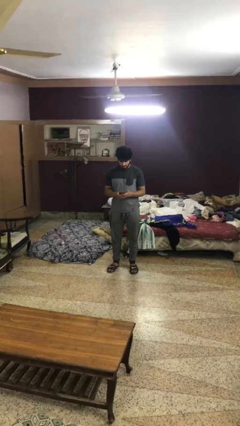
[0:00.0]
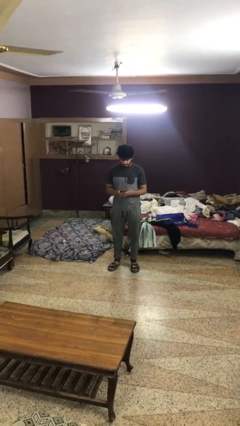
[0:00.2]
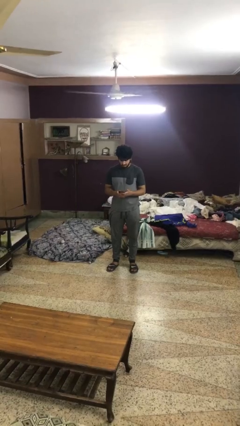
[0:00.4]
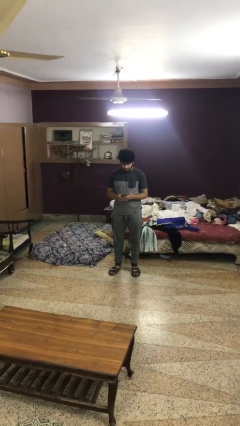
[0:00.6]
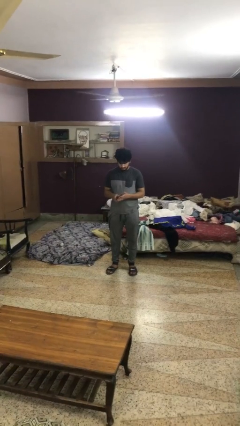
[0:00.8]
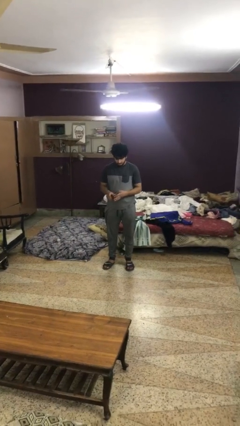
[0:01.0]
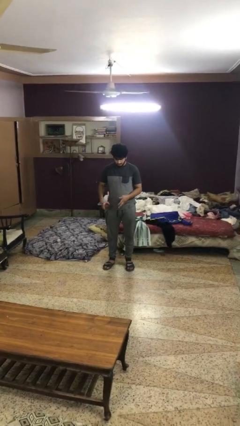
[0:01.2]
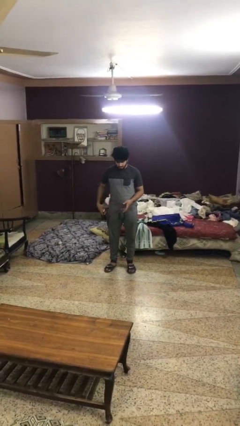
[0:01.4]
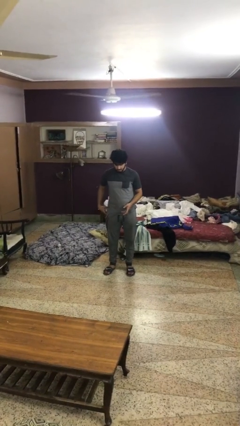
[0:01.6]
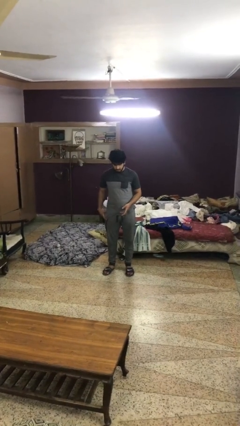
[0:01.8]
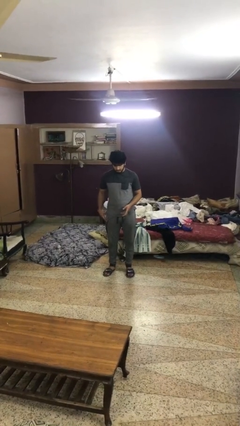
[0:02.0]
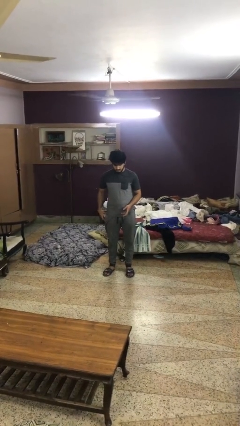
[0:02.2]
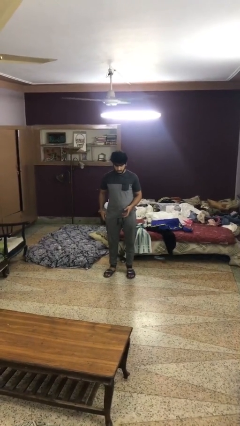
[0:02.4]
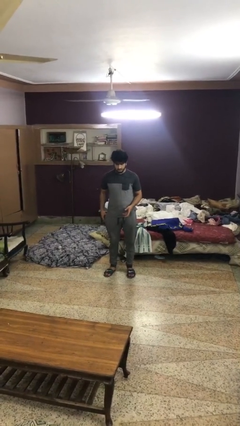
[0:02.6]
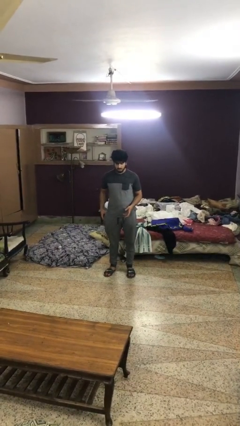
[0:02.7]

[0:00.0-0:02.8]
person puts phone into pocket

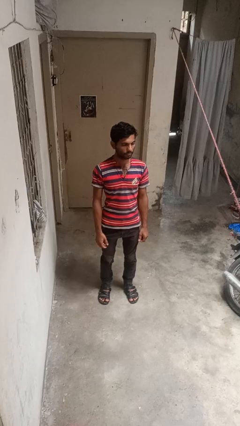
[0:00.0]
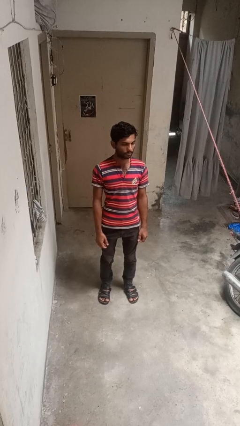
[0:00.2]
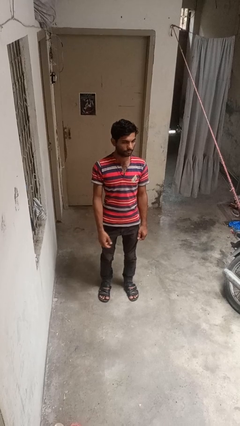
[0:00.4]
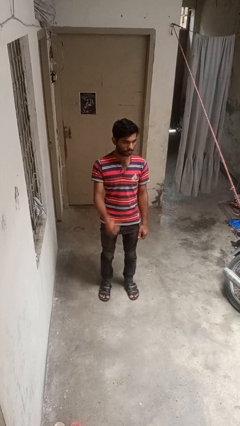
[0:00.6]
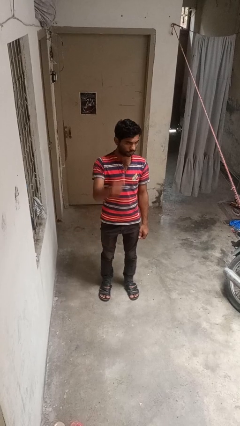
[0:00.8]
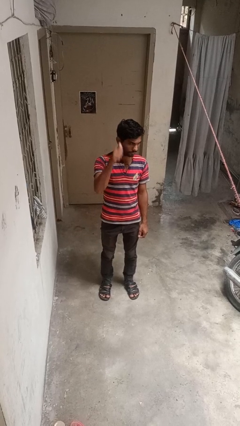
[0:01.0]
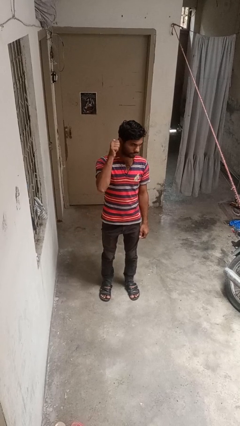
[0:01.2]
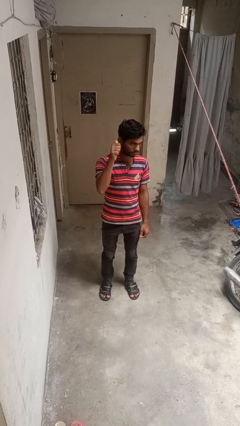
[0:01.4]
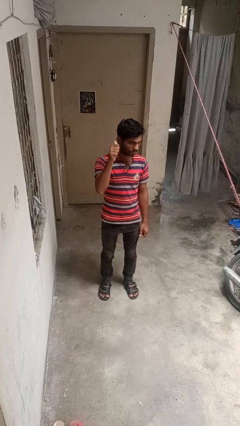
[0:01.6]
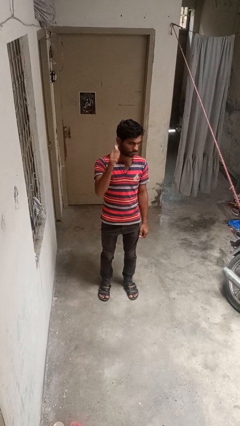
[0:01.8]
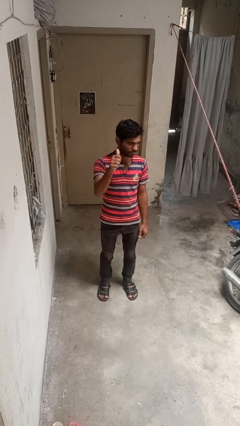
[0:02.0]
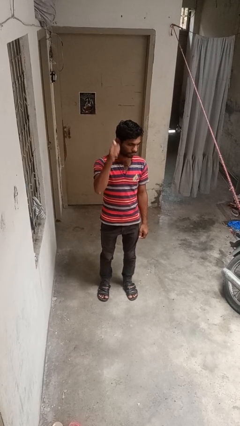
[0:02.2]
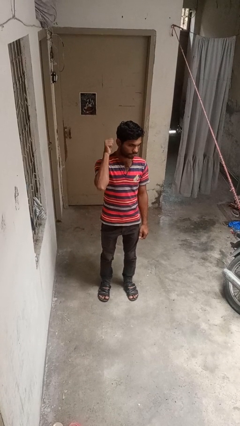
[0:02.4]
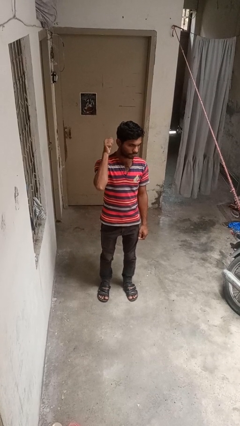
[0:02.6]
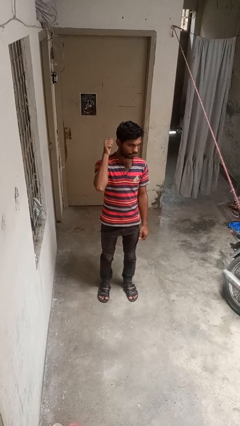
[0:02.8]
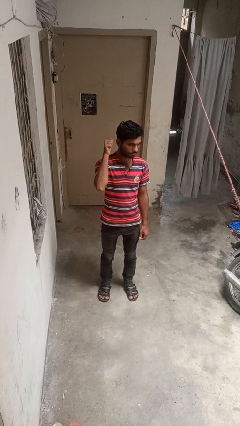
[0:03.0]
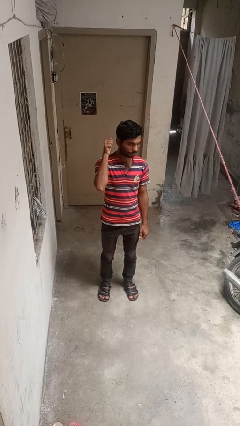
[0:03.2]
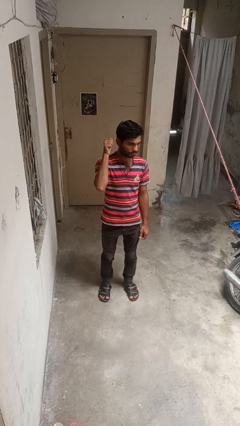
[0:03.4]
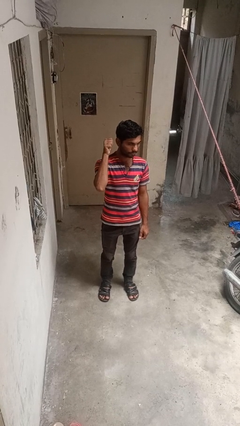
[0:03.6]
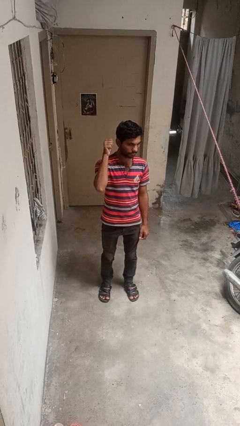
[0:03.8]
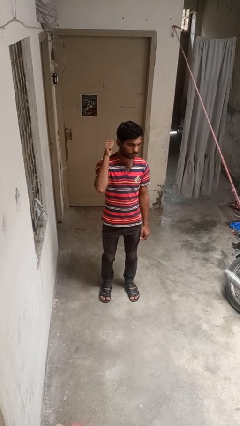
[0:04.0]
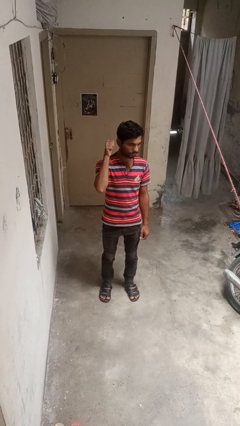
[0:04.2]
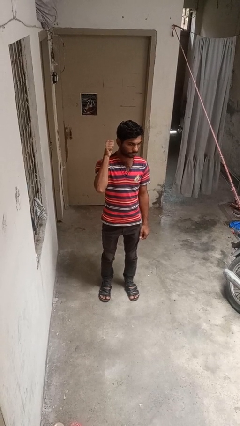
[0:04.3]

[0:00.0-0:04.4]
person gestures behind me

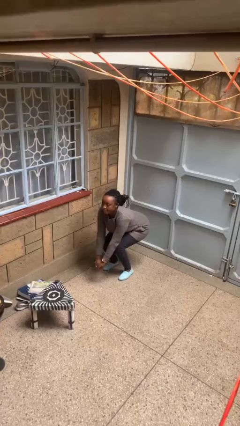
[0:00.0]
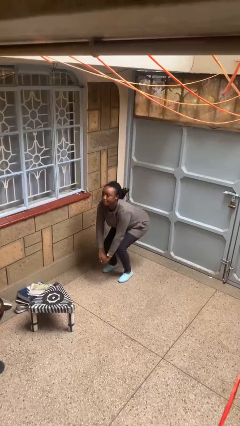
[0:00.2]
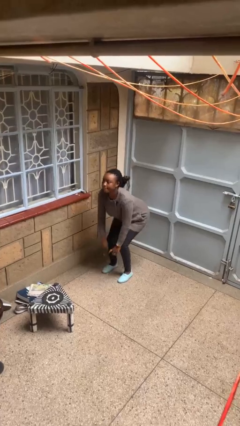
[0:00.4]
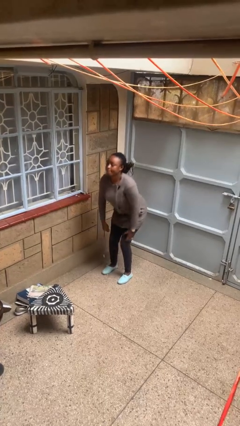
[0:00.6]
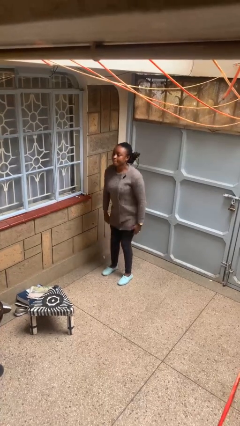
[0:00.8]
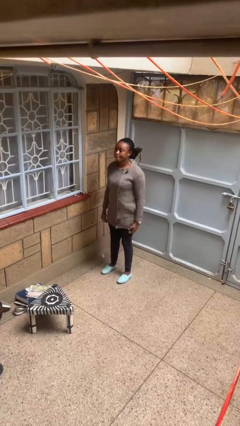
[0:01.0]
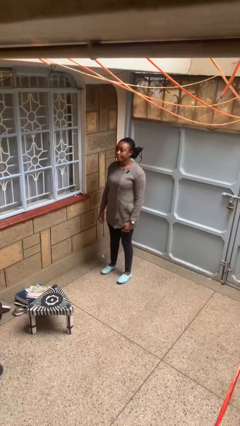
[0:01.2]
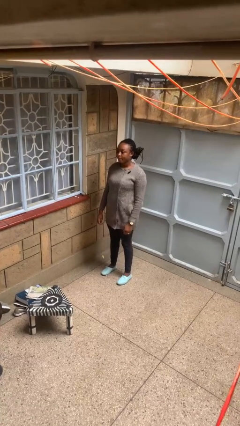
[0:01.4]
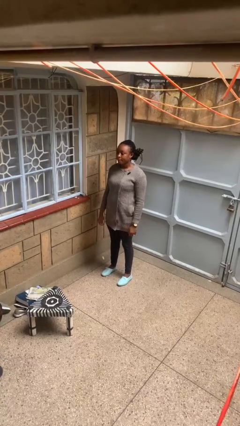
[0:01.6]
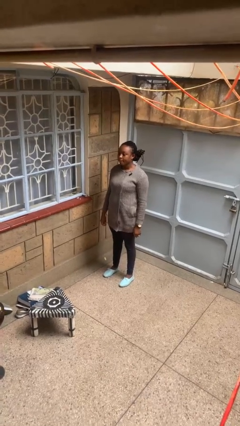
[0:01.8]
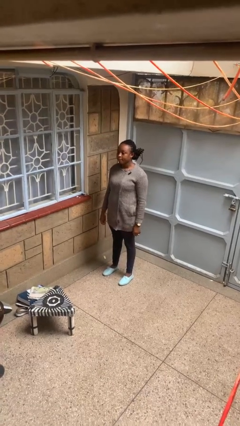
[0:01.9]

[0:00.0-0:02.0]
person stands up

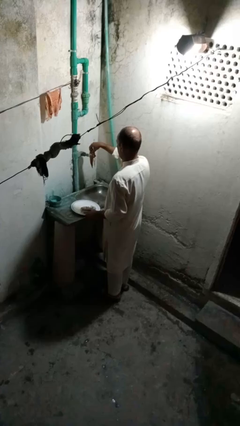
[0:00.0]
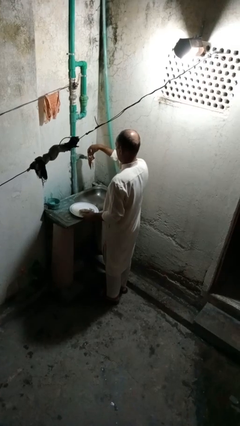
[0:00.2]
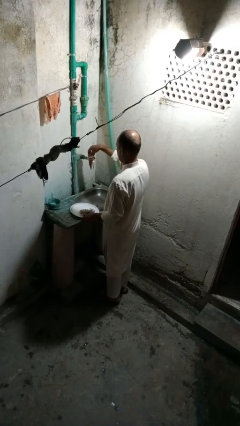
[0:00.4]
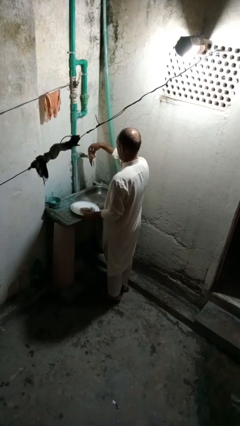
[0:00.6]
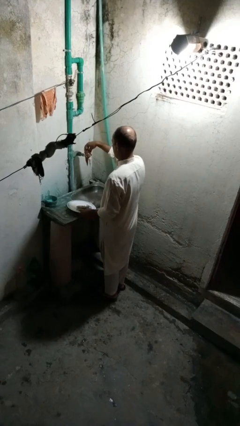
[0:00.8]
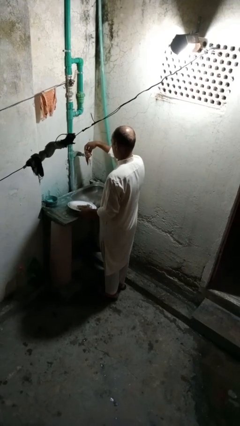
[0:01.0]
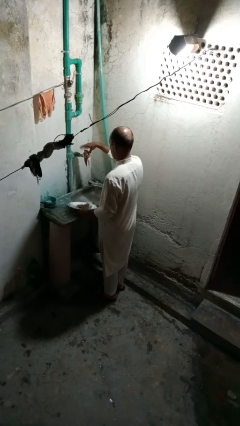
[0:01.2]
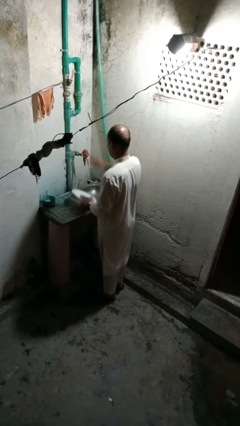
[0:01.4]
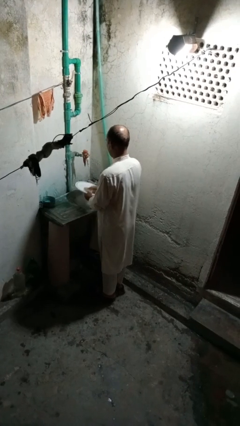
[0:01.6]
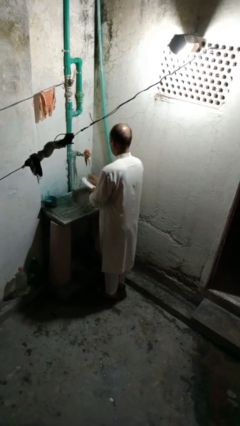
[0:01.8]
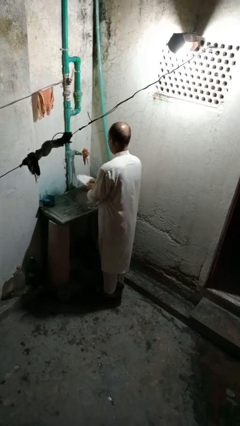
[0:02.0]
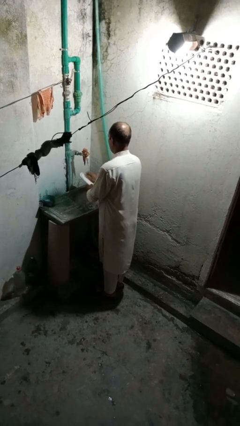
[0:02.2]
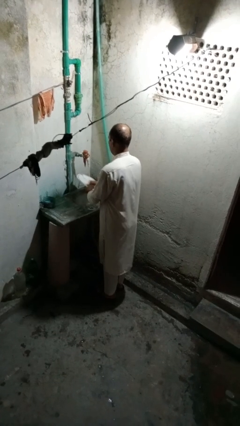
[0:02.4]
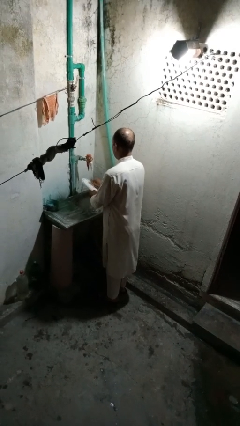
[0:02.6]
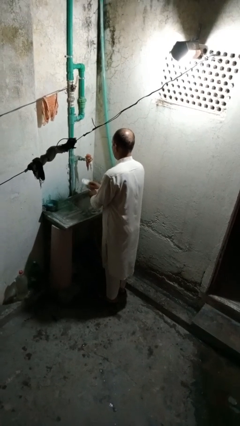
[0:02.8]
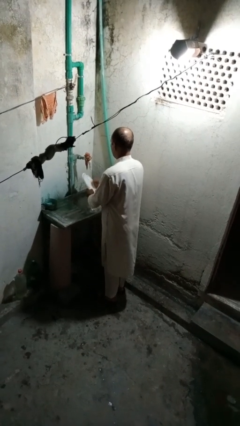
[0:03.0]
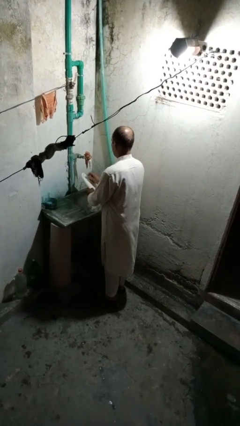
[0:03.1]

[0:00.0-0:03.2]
person washes dish

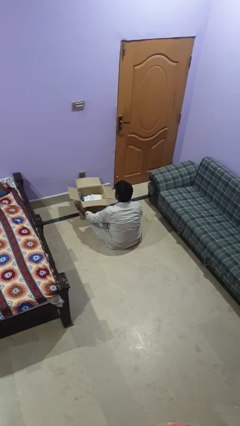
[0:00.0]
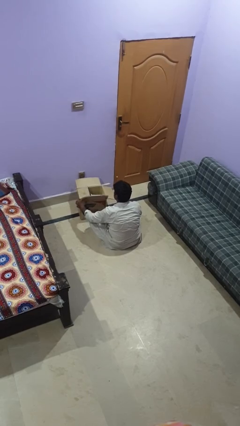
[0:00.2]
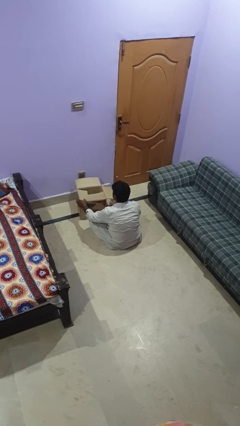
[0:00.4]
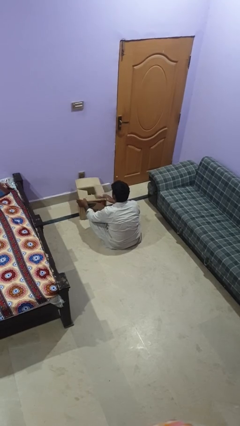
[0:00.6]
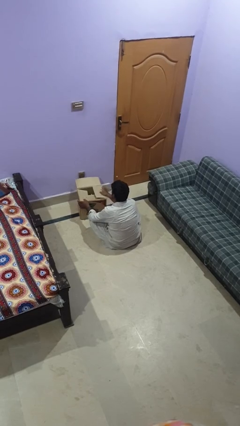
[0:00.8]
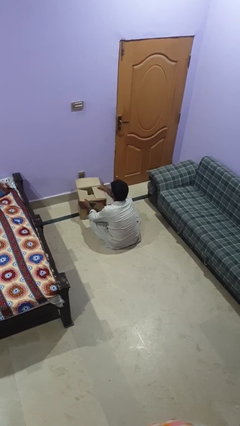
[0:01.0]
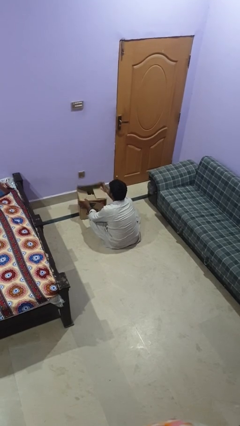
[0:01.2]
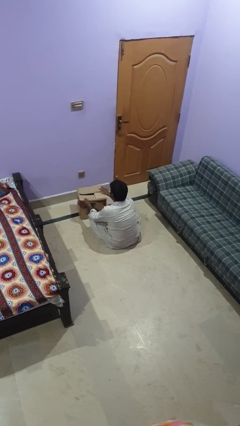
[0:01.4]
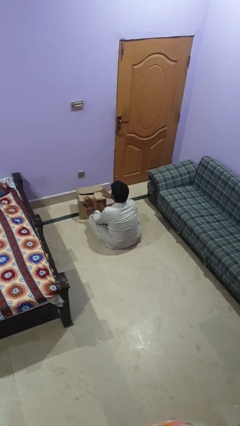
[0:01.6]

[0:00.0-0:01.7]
person closes box

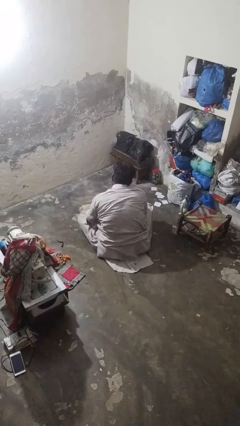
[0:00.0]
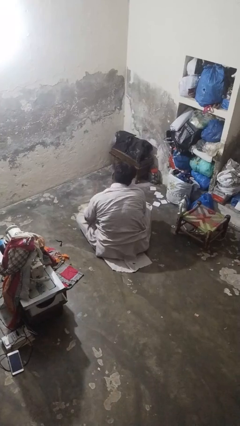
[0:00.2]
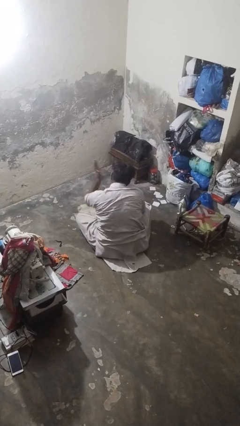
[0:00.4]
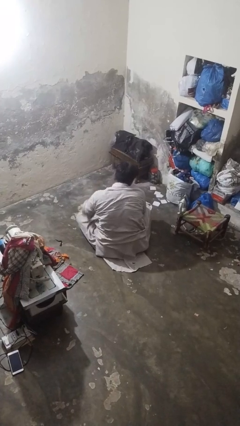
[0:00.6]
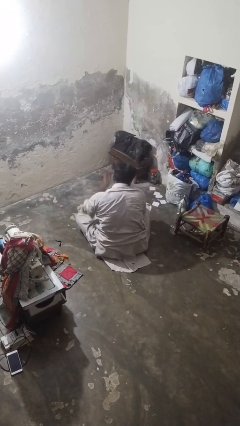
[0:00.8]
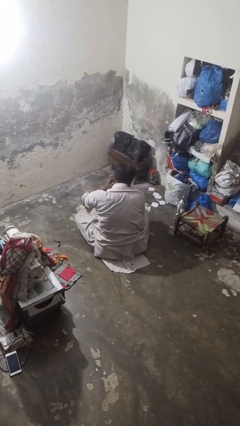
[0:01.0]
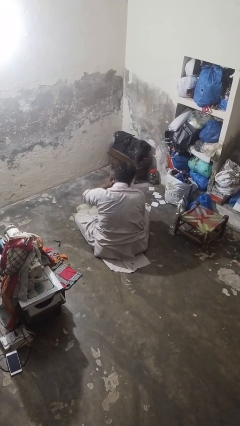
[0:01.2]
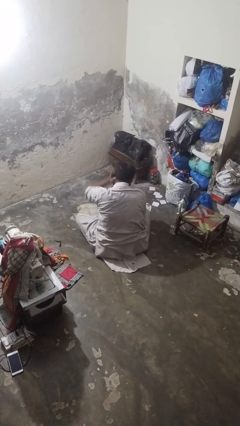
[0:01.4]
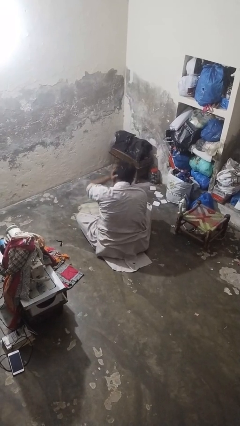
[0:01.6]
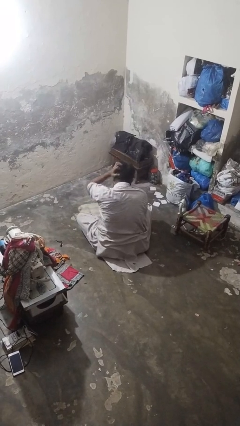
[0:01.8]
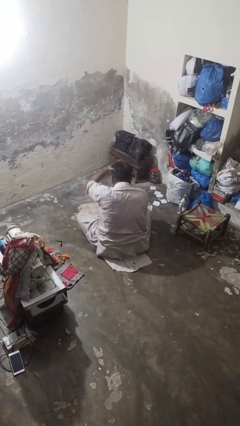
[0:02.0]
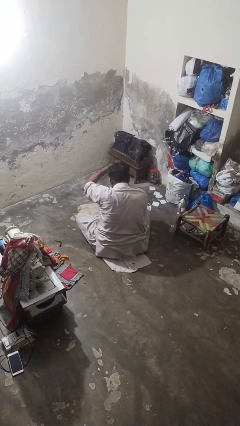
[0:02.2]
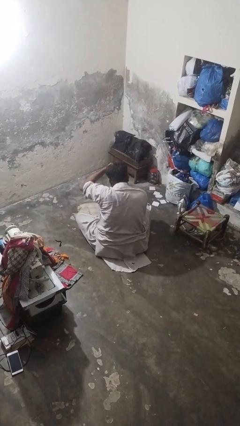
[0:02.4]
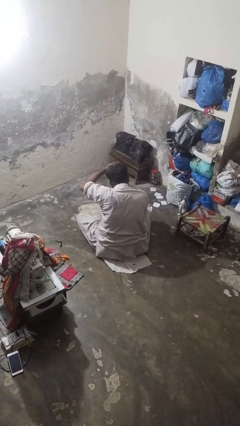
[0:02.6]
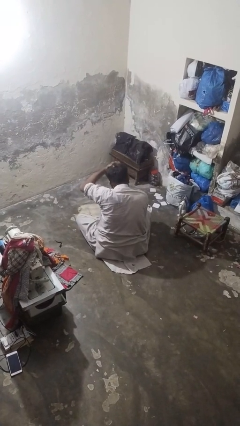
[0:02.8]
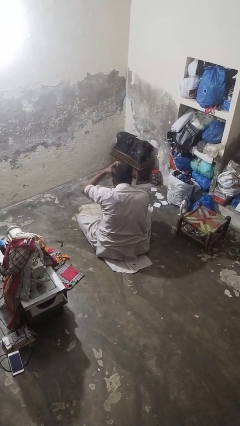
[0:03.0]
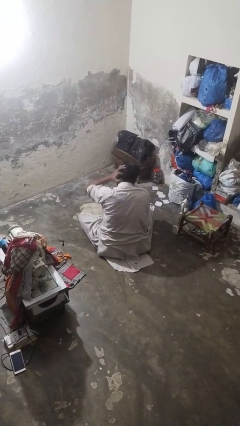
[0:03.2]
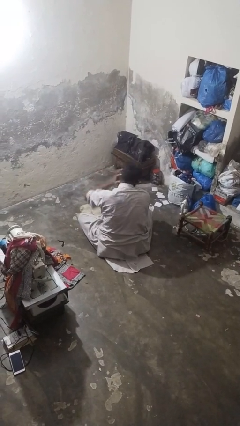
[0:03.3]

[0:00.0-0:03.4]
person swats bug

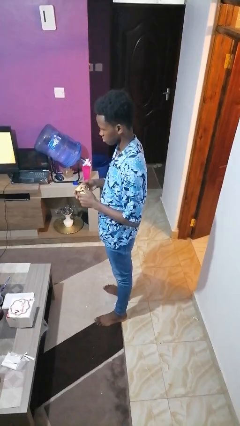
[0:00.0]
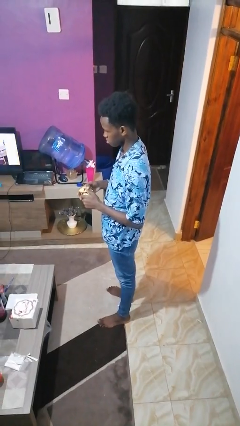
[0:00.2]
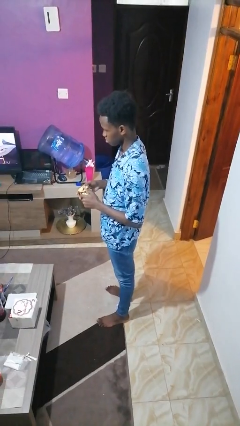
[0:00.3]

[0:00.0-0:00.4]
person crumples paper
